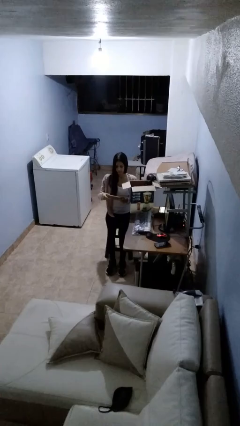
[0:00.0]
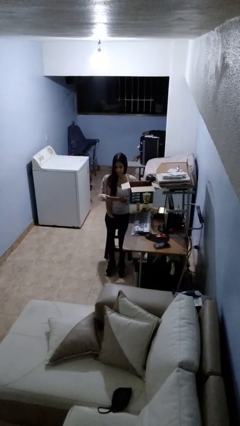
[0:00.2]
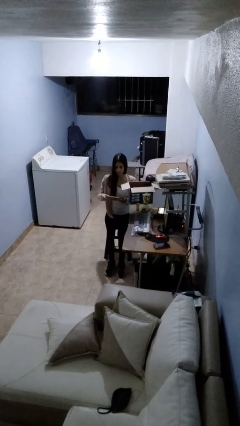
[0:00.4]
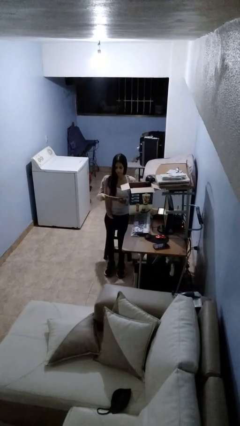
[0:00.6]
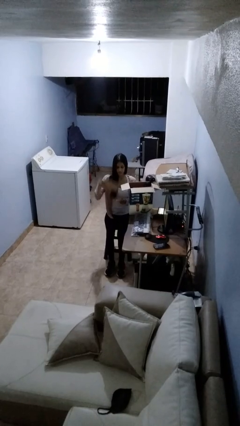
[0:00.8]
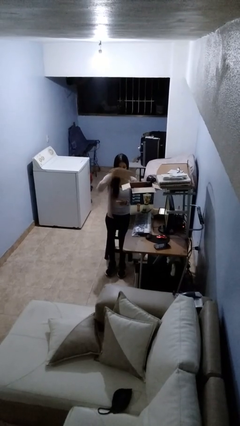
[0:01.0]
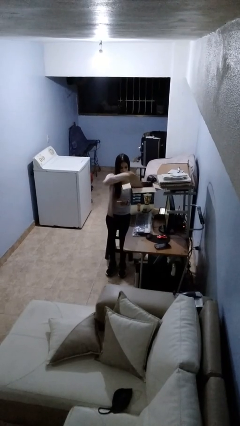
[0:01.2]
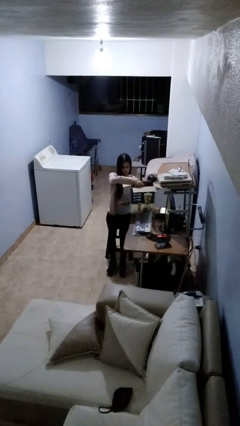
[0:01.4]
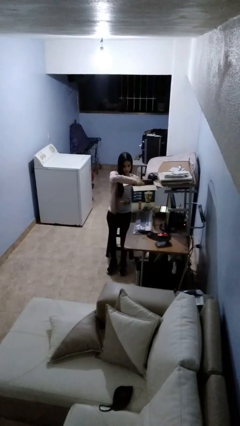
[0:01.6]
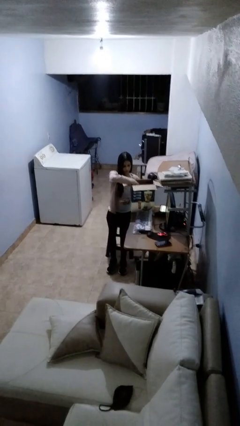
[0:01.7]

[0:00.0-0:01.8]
person puts object into box

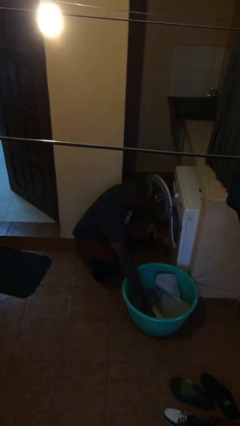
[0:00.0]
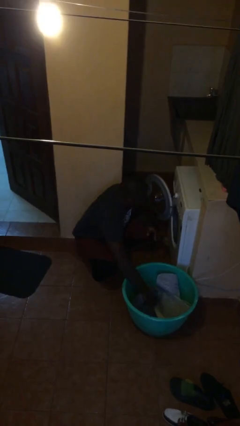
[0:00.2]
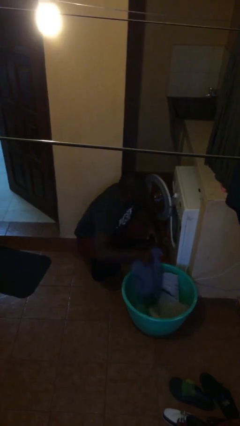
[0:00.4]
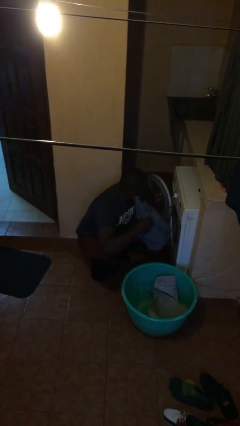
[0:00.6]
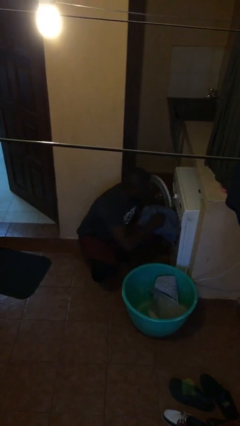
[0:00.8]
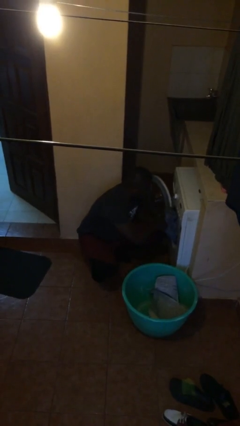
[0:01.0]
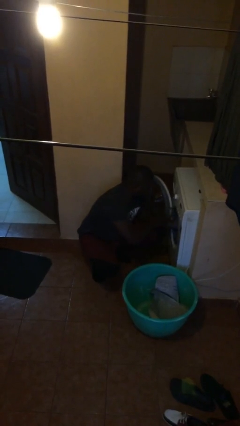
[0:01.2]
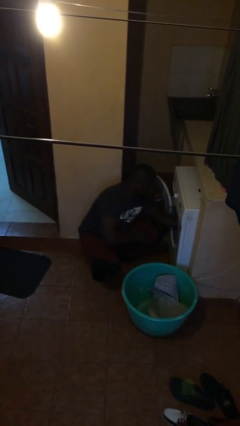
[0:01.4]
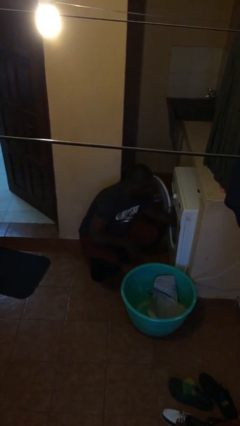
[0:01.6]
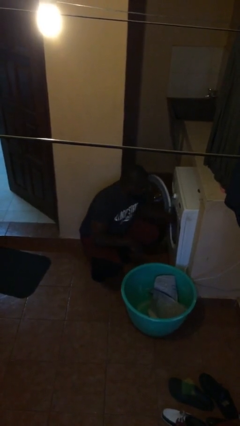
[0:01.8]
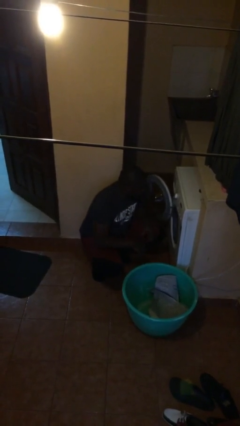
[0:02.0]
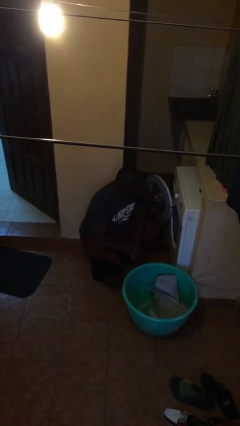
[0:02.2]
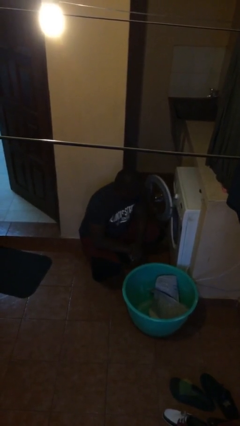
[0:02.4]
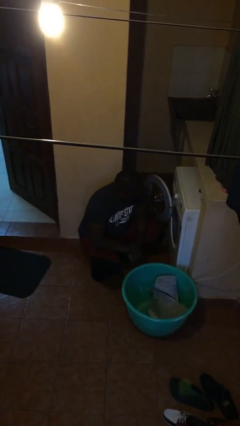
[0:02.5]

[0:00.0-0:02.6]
person loads clotheswasher

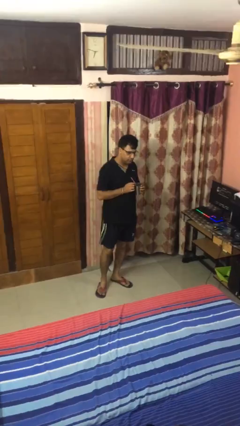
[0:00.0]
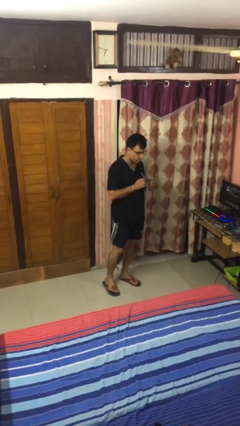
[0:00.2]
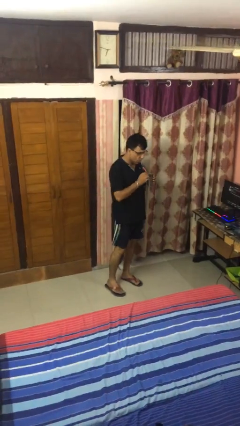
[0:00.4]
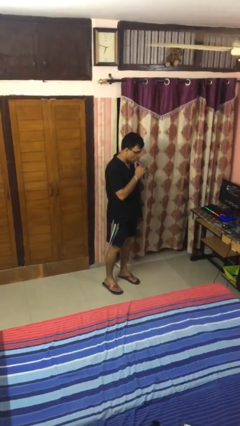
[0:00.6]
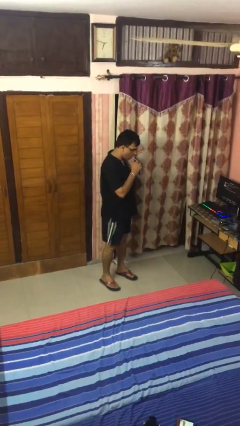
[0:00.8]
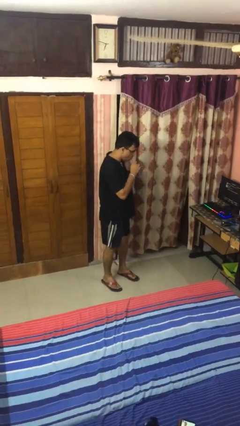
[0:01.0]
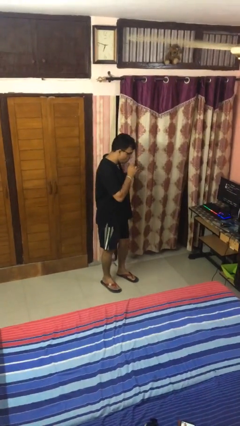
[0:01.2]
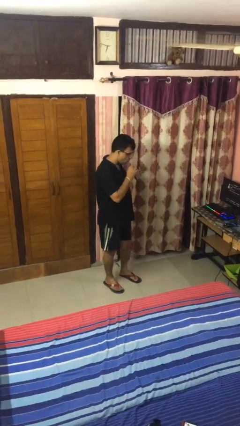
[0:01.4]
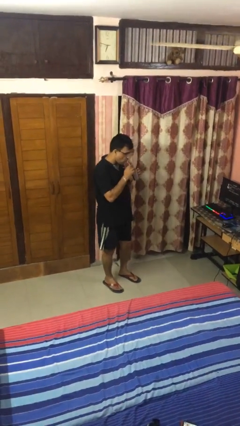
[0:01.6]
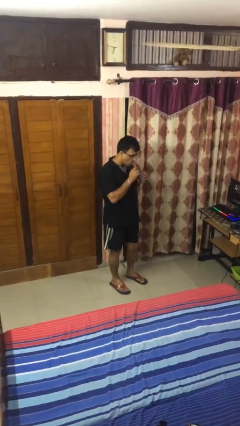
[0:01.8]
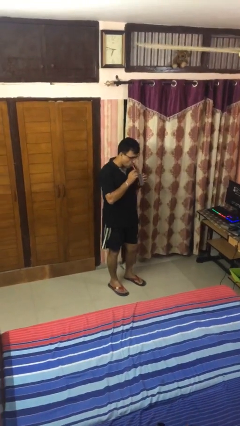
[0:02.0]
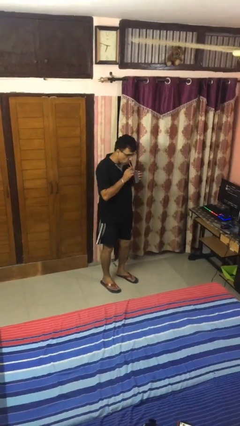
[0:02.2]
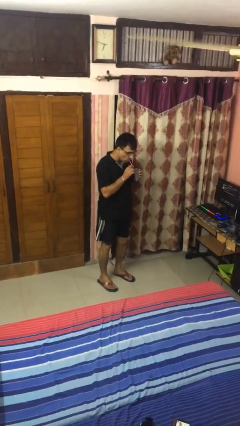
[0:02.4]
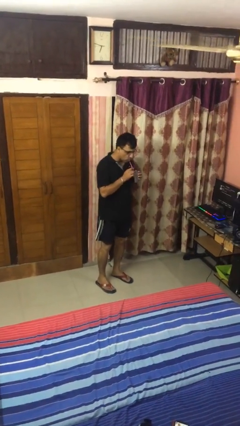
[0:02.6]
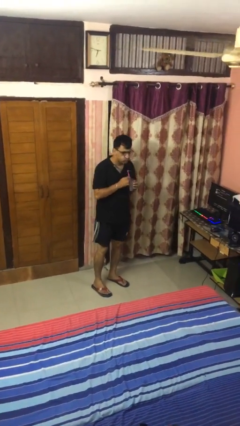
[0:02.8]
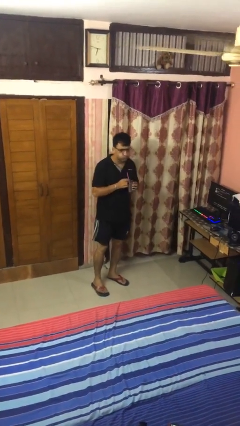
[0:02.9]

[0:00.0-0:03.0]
person drinks from straw

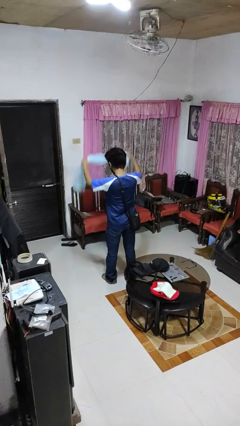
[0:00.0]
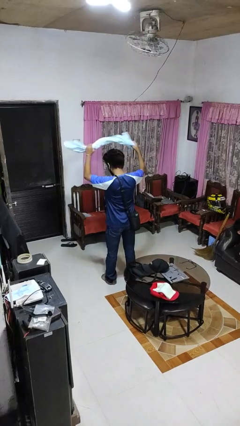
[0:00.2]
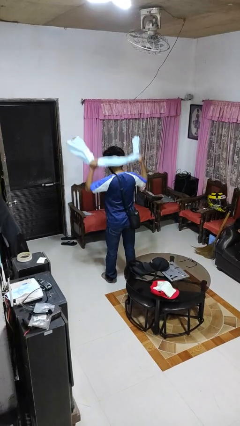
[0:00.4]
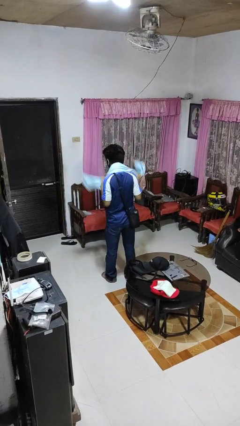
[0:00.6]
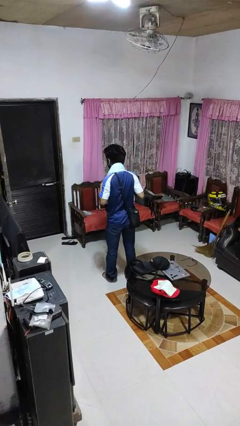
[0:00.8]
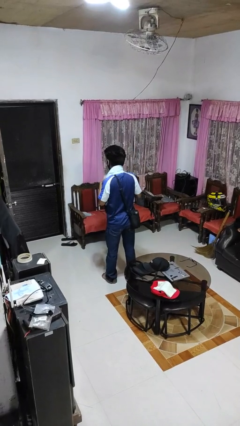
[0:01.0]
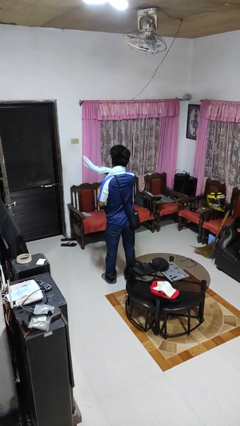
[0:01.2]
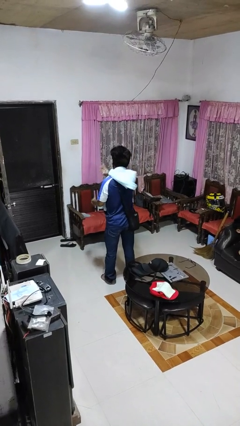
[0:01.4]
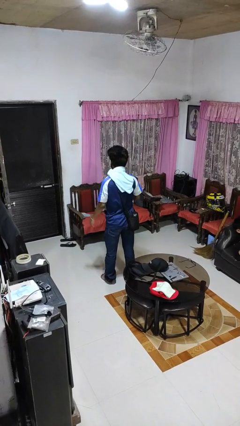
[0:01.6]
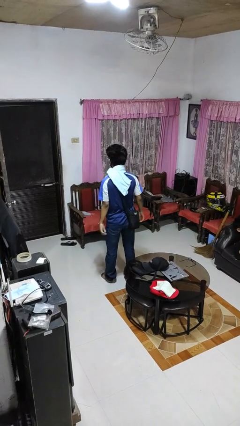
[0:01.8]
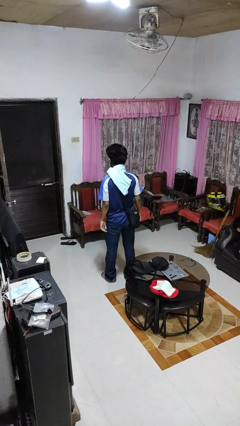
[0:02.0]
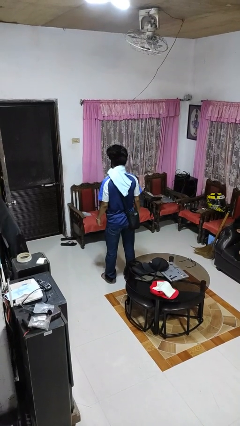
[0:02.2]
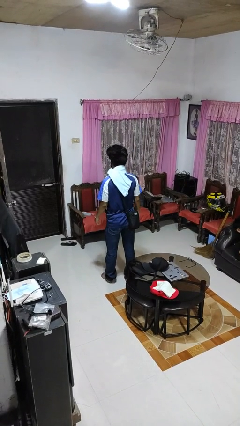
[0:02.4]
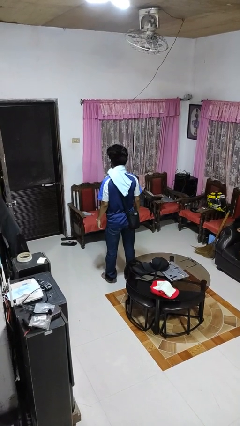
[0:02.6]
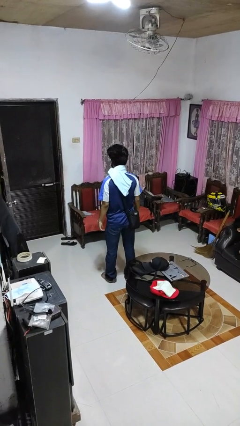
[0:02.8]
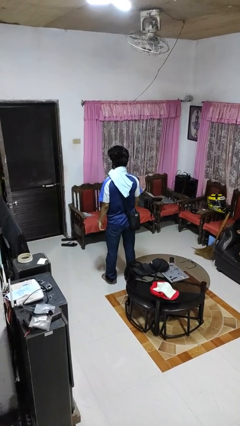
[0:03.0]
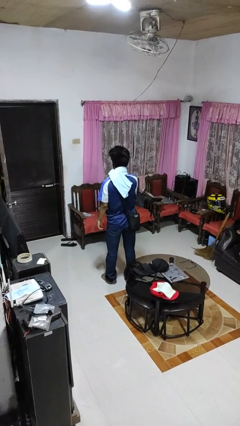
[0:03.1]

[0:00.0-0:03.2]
person puts on scarf

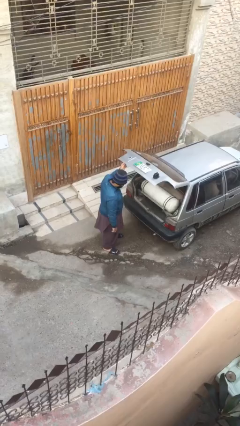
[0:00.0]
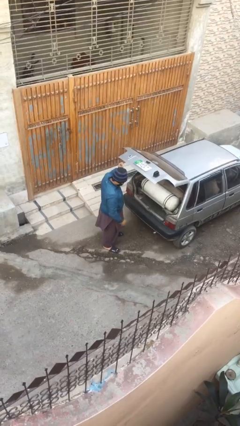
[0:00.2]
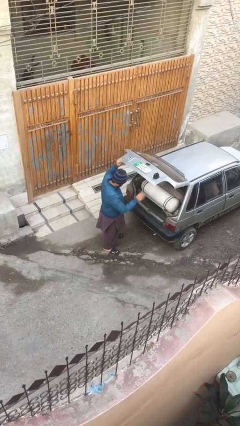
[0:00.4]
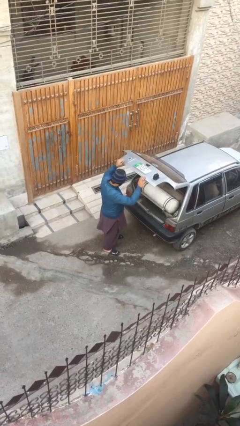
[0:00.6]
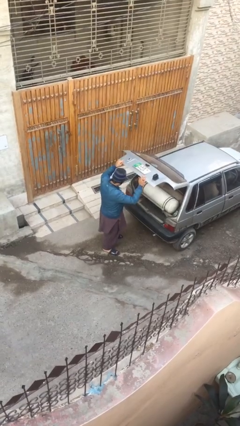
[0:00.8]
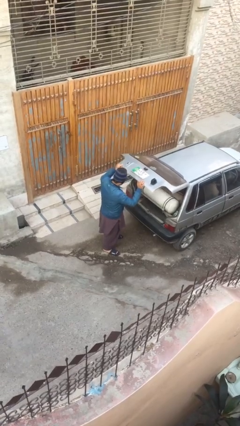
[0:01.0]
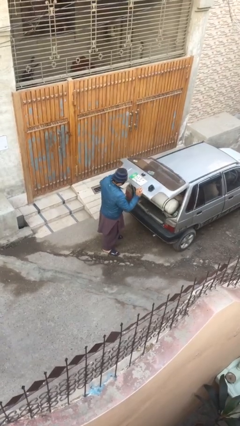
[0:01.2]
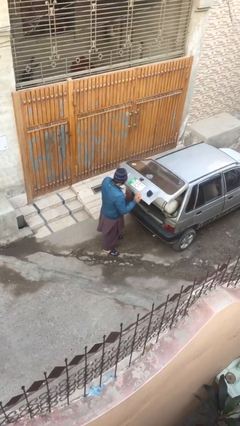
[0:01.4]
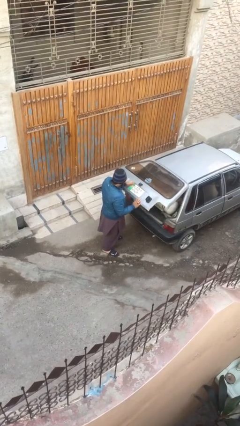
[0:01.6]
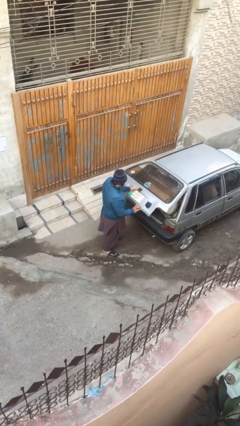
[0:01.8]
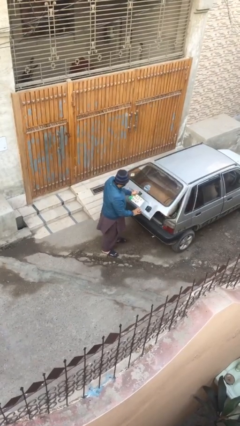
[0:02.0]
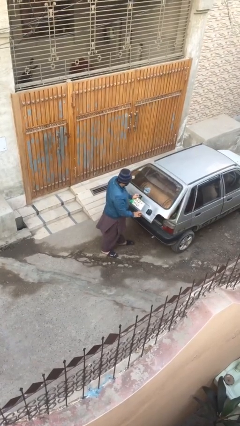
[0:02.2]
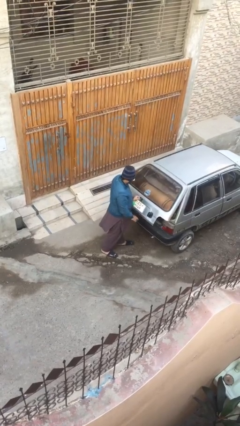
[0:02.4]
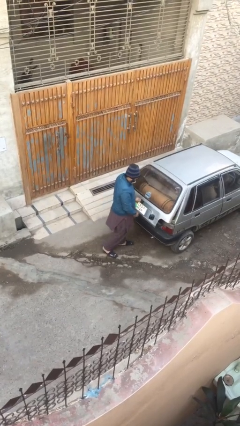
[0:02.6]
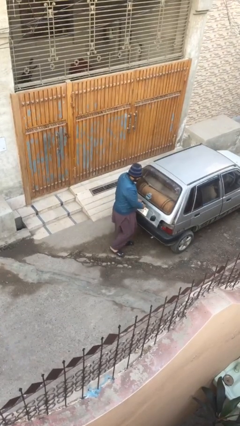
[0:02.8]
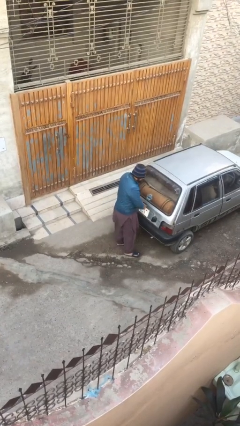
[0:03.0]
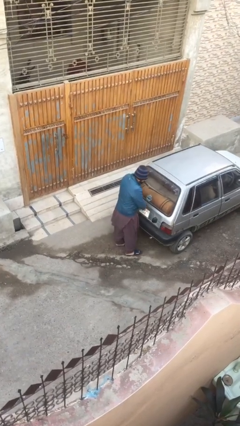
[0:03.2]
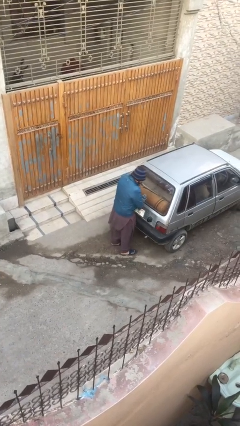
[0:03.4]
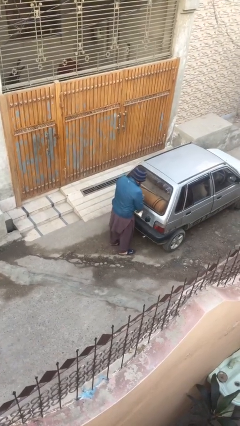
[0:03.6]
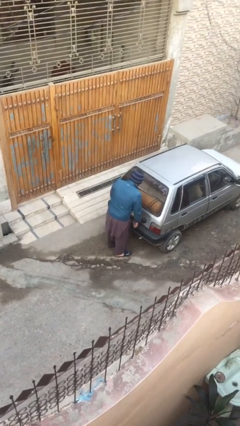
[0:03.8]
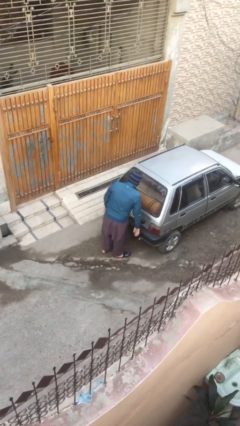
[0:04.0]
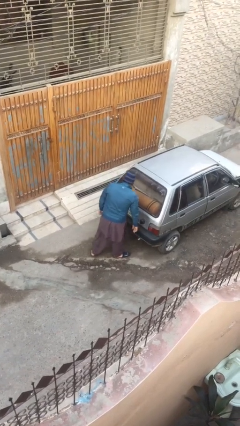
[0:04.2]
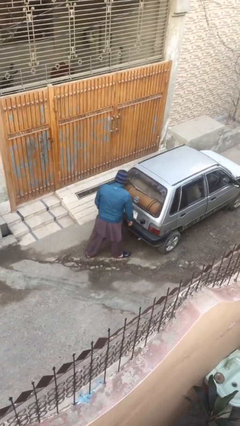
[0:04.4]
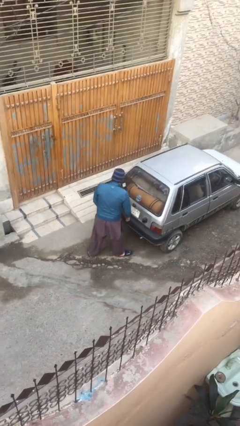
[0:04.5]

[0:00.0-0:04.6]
person closes car trunk

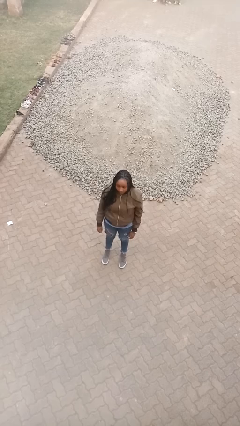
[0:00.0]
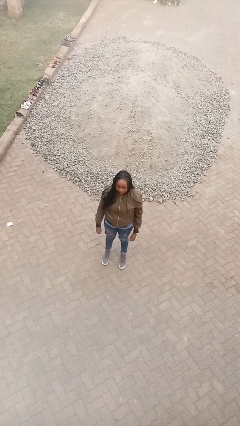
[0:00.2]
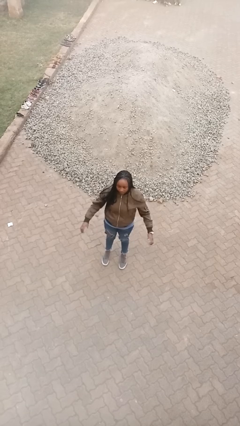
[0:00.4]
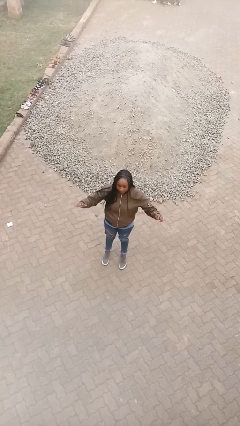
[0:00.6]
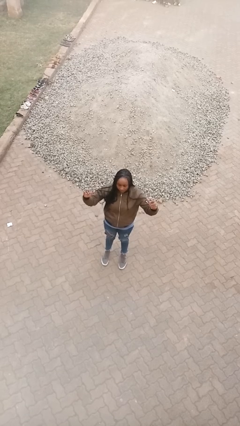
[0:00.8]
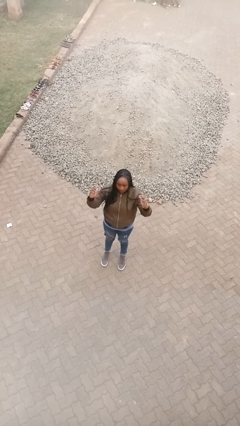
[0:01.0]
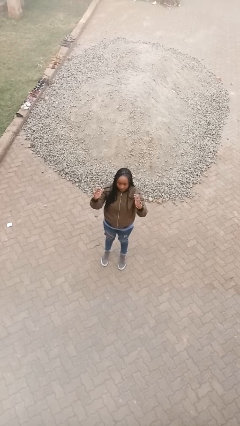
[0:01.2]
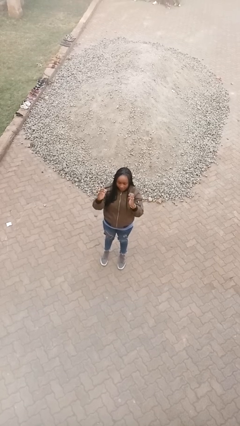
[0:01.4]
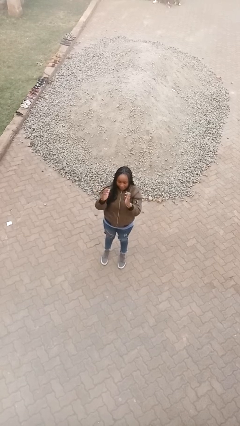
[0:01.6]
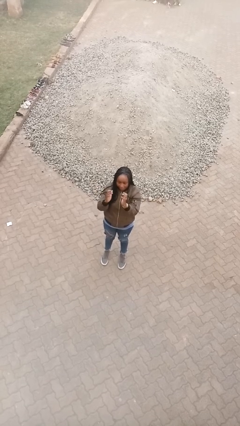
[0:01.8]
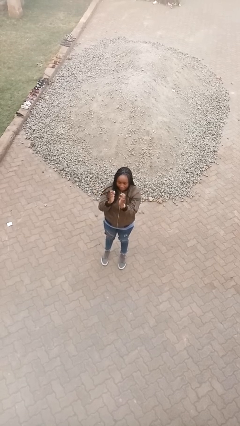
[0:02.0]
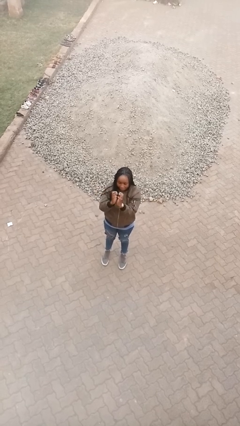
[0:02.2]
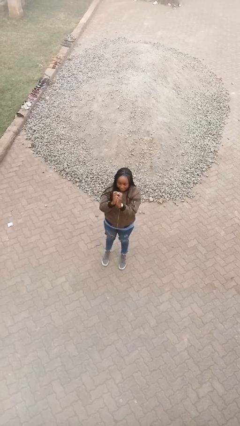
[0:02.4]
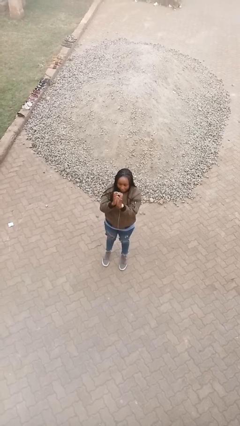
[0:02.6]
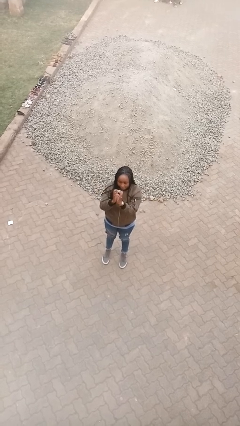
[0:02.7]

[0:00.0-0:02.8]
person gestures zoom in
